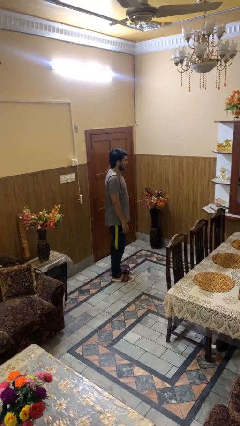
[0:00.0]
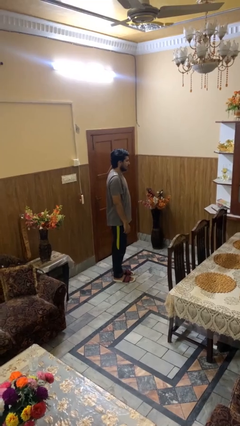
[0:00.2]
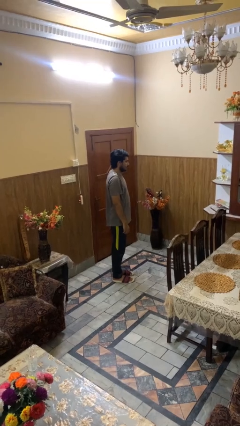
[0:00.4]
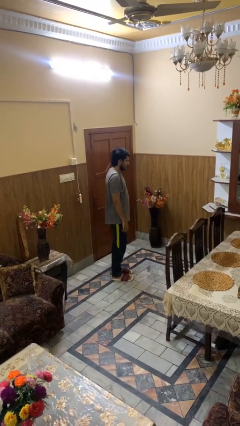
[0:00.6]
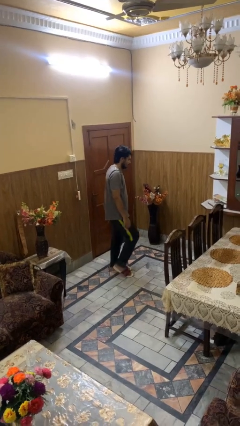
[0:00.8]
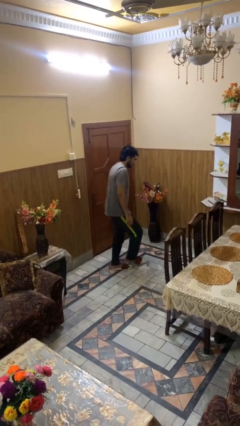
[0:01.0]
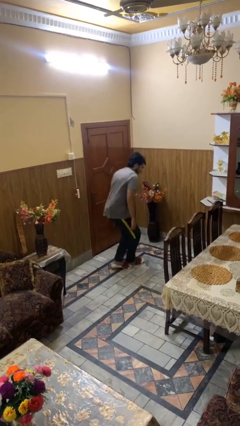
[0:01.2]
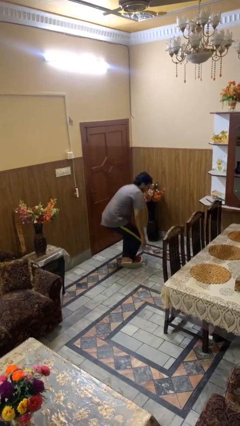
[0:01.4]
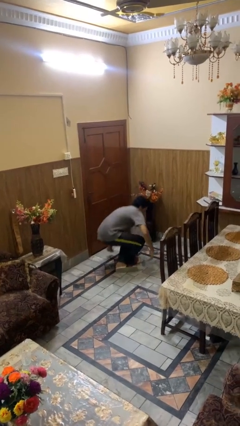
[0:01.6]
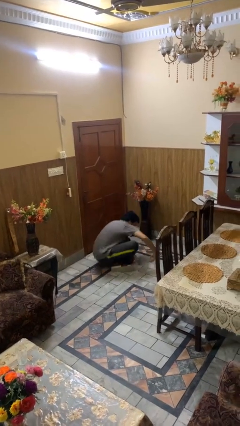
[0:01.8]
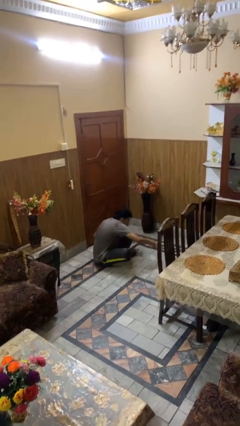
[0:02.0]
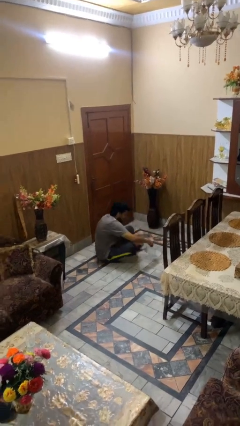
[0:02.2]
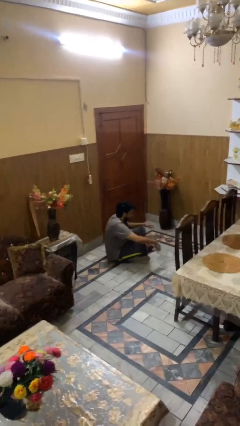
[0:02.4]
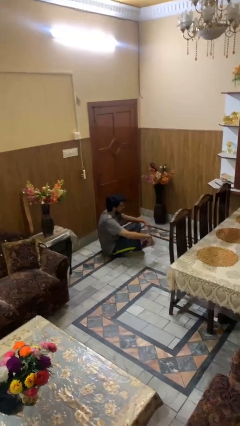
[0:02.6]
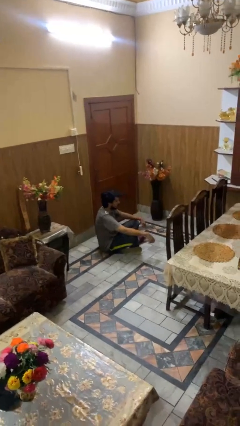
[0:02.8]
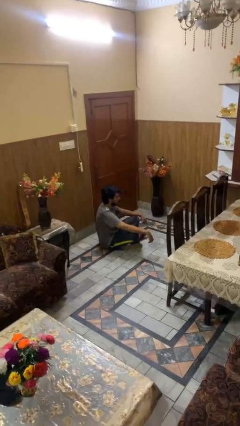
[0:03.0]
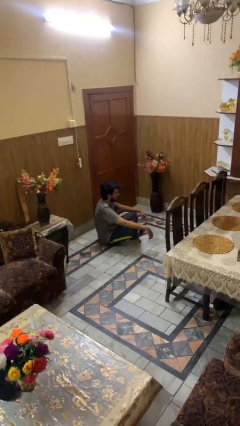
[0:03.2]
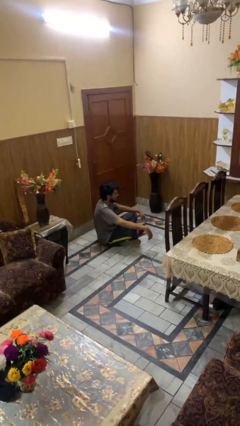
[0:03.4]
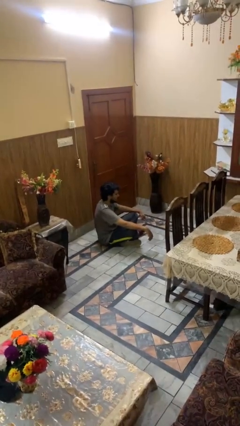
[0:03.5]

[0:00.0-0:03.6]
person sits crisscross

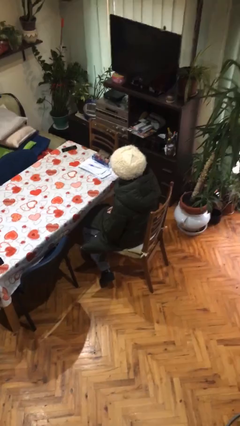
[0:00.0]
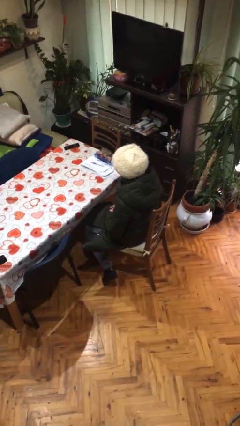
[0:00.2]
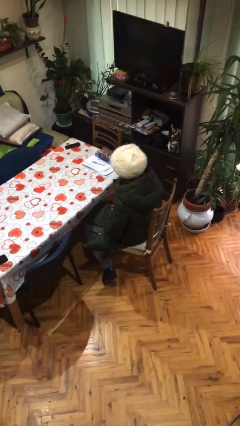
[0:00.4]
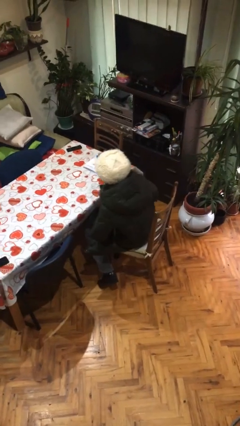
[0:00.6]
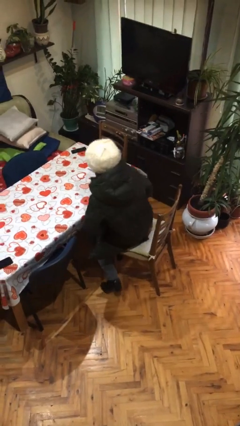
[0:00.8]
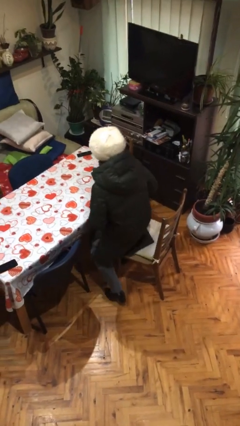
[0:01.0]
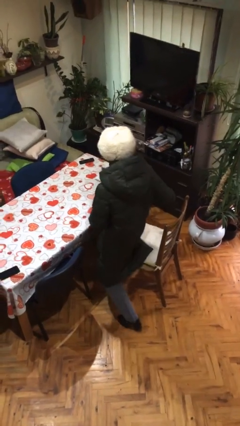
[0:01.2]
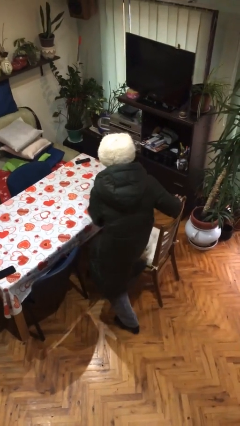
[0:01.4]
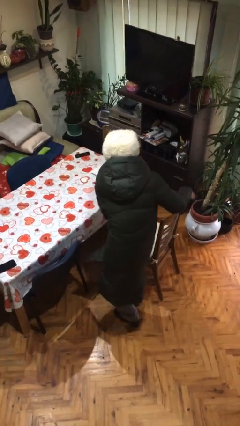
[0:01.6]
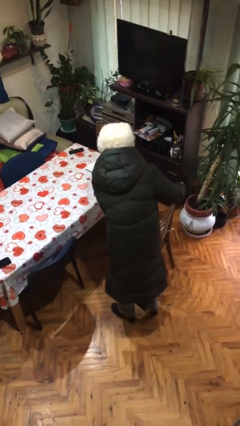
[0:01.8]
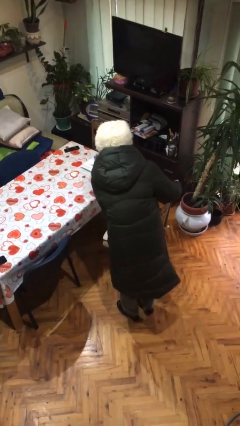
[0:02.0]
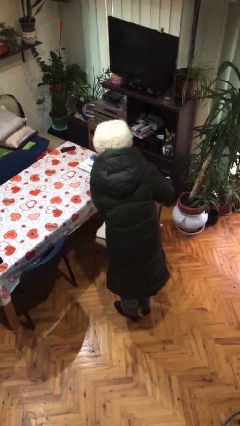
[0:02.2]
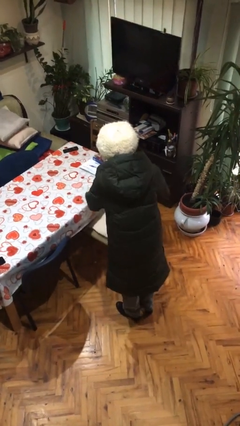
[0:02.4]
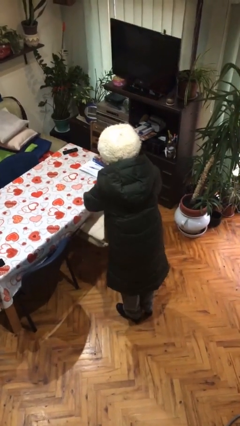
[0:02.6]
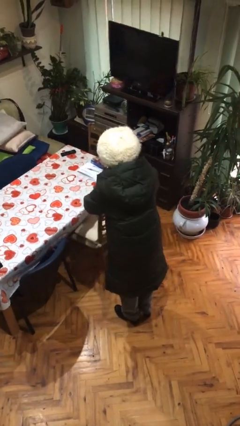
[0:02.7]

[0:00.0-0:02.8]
person stands up

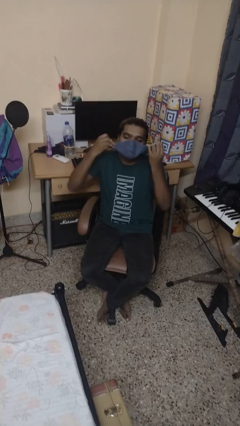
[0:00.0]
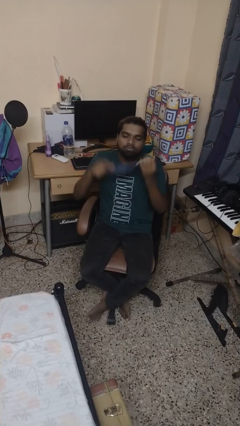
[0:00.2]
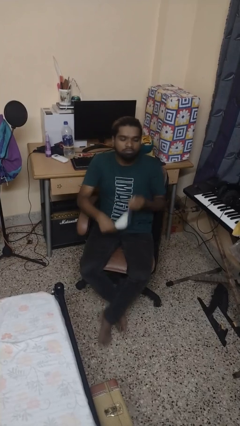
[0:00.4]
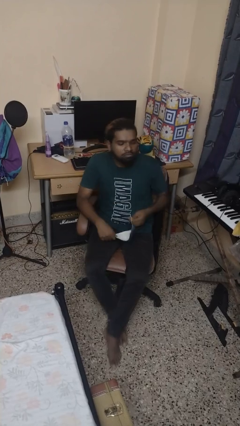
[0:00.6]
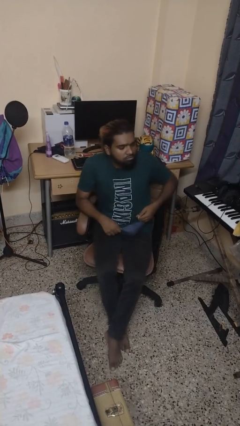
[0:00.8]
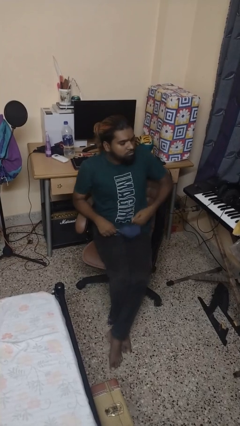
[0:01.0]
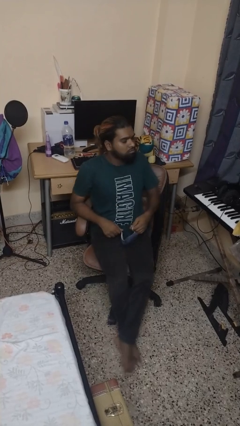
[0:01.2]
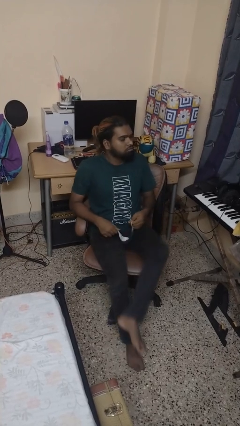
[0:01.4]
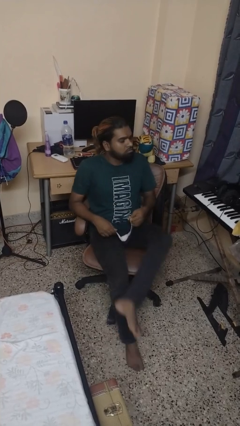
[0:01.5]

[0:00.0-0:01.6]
person takes off facemask

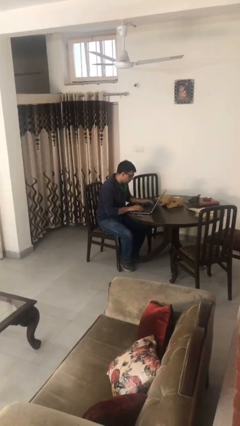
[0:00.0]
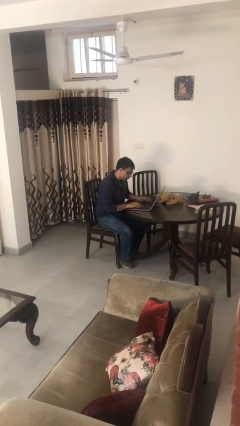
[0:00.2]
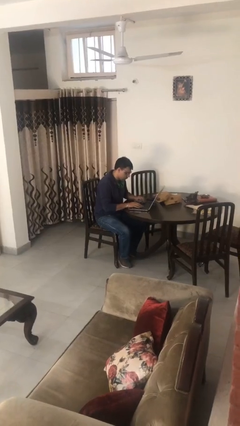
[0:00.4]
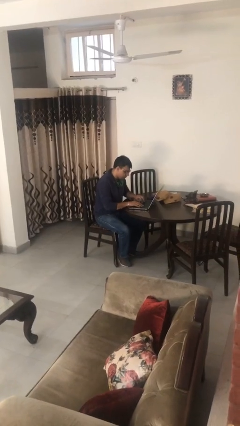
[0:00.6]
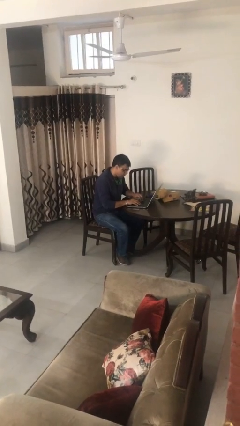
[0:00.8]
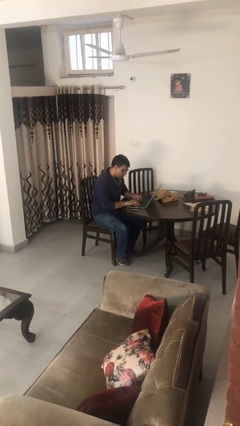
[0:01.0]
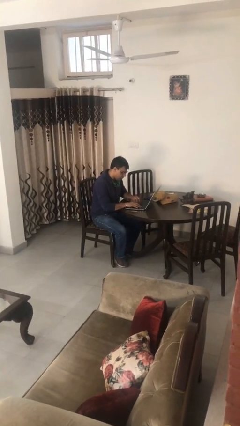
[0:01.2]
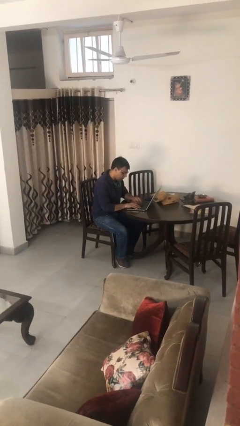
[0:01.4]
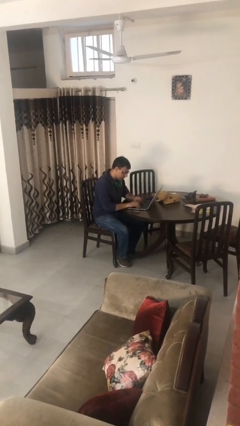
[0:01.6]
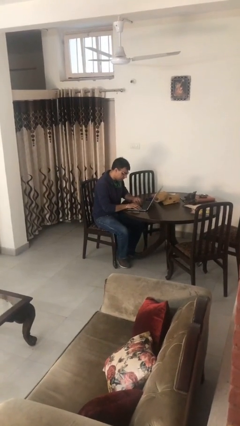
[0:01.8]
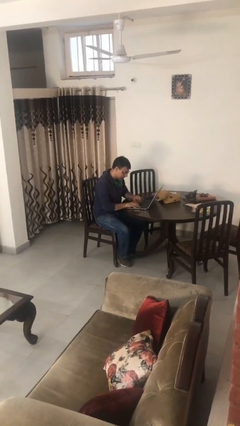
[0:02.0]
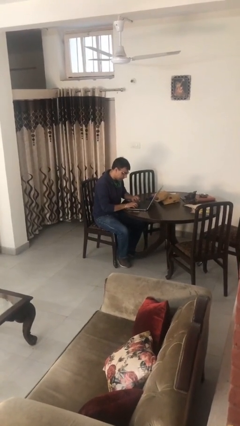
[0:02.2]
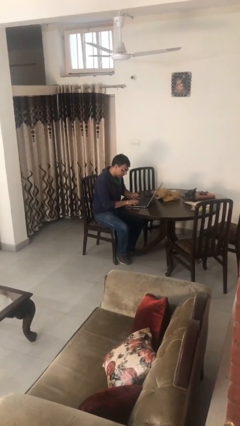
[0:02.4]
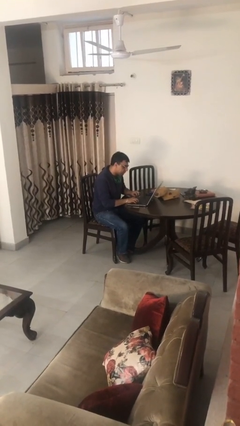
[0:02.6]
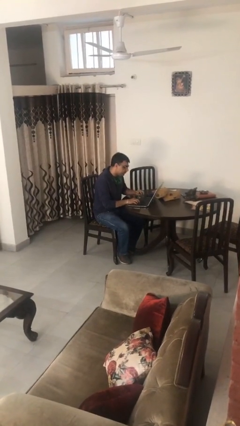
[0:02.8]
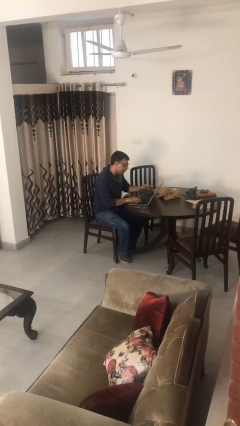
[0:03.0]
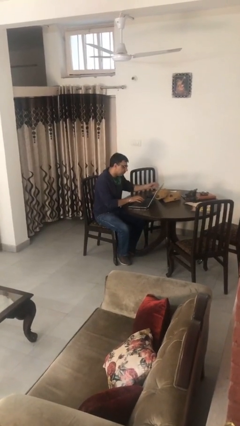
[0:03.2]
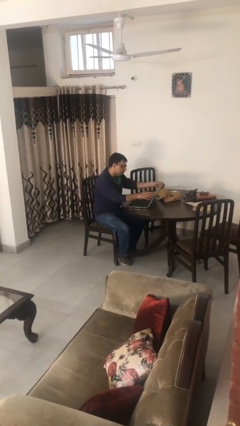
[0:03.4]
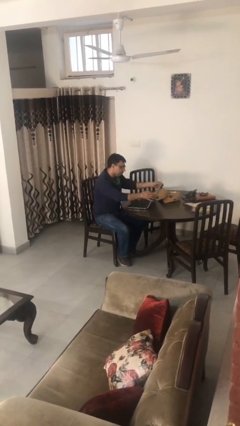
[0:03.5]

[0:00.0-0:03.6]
person interacts with laptop

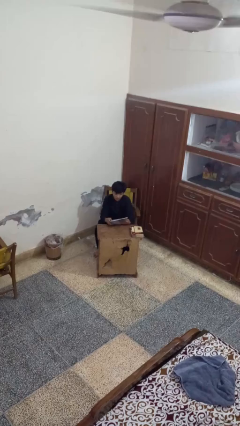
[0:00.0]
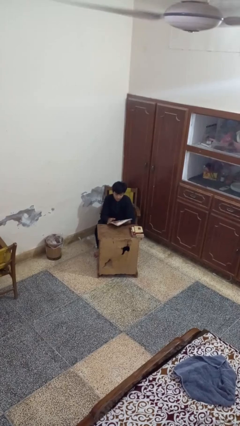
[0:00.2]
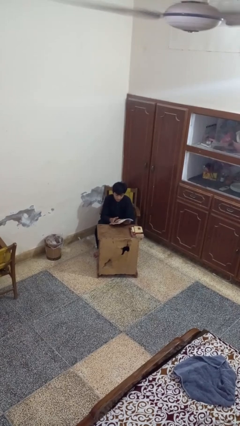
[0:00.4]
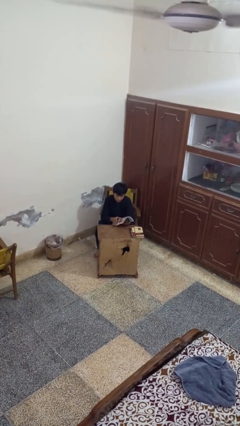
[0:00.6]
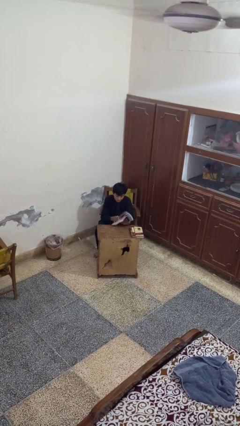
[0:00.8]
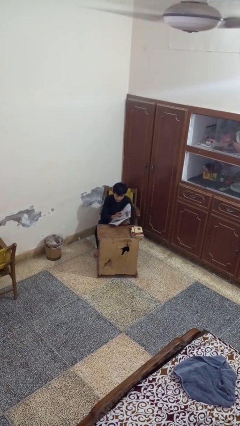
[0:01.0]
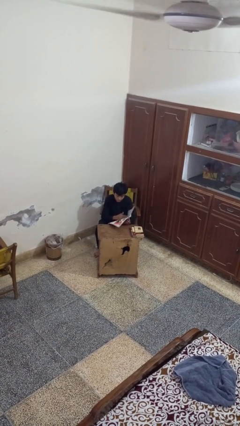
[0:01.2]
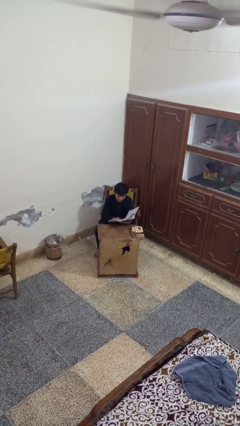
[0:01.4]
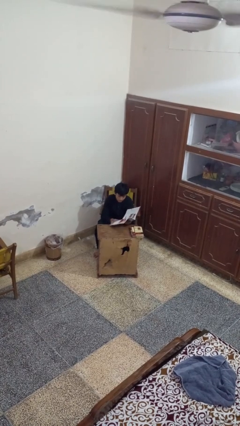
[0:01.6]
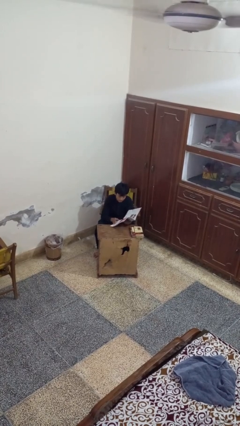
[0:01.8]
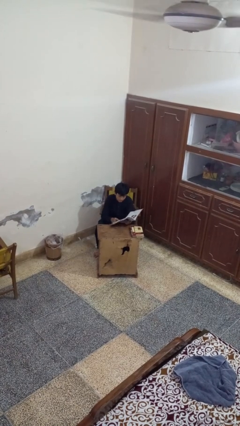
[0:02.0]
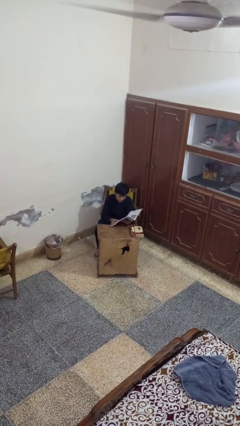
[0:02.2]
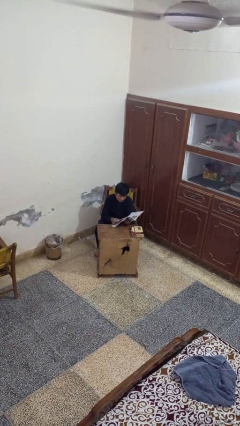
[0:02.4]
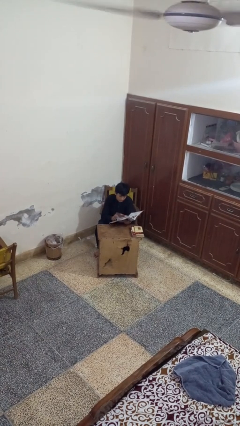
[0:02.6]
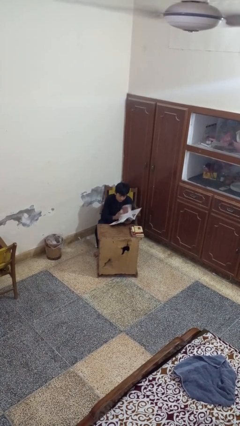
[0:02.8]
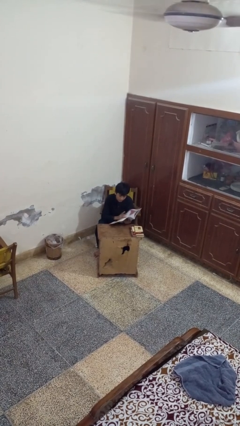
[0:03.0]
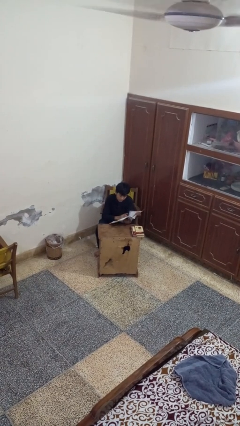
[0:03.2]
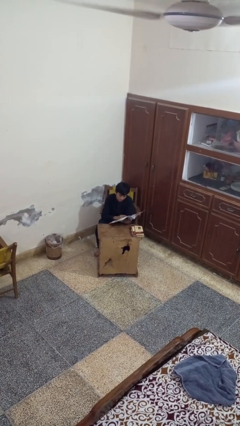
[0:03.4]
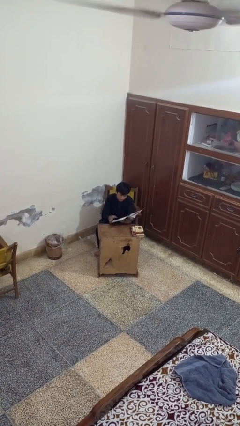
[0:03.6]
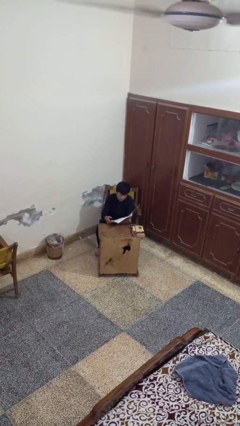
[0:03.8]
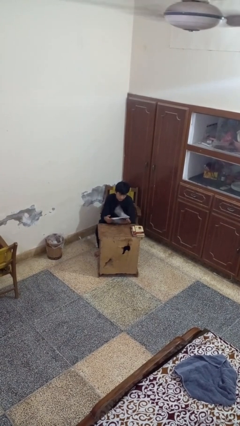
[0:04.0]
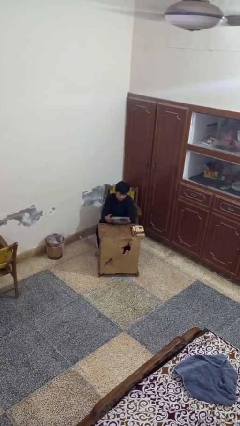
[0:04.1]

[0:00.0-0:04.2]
person reads magazine

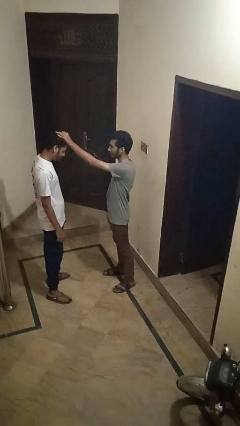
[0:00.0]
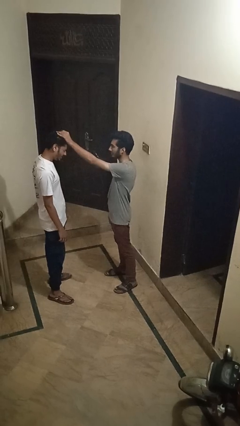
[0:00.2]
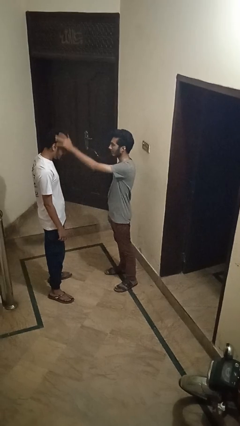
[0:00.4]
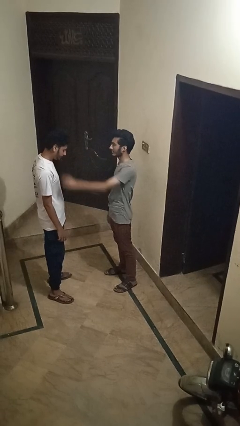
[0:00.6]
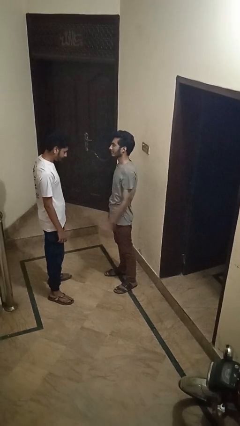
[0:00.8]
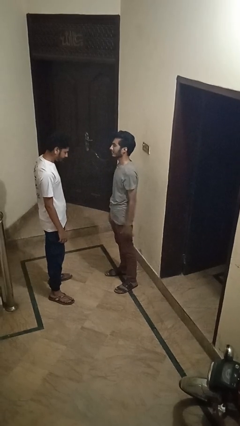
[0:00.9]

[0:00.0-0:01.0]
person grabs person by hair

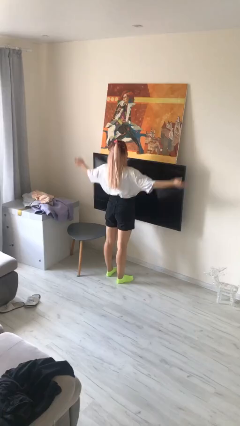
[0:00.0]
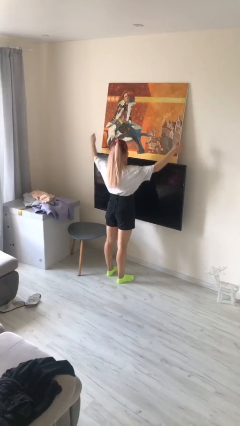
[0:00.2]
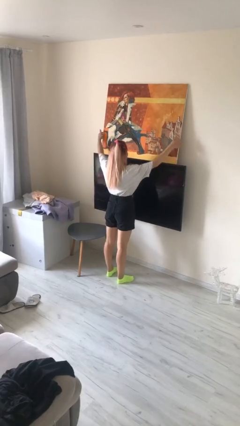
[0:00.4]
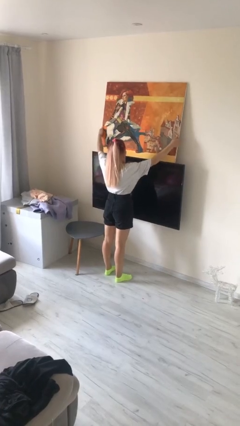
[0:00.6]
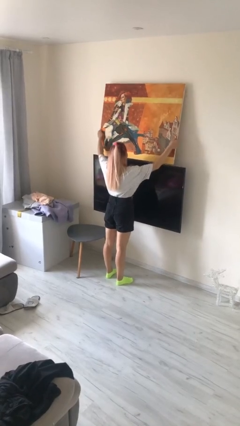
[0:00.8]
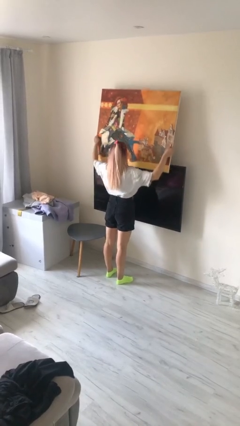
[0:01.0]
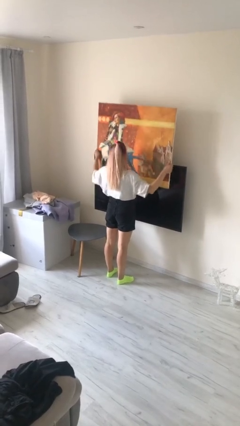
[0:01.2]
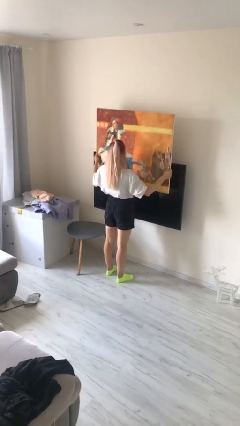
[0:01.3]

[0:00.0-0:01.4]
person takes down picture frame
